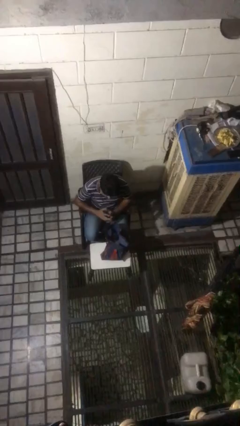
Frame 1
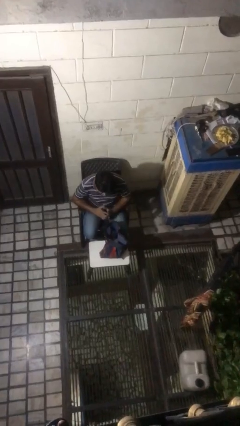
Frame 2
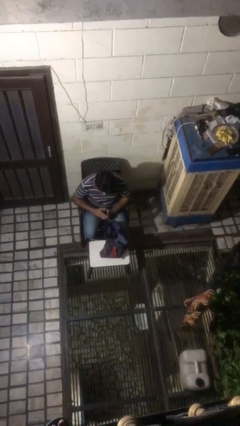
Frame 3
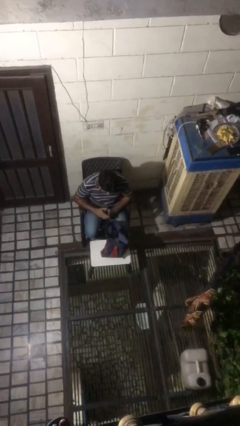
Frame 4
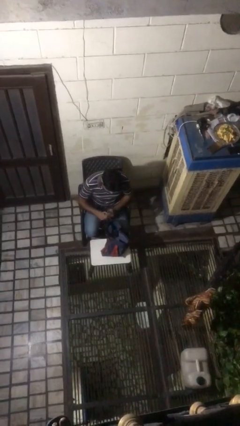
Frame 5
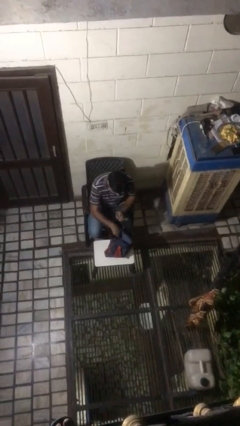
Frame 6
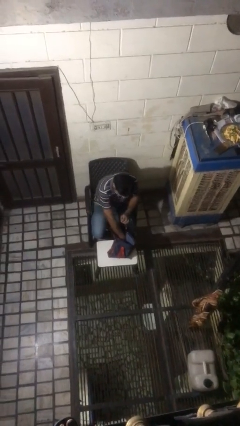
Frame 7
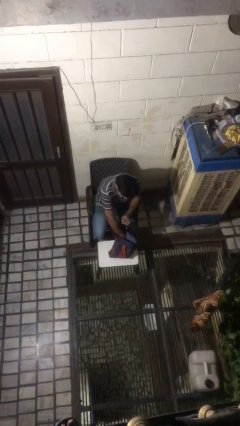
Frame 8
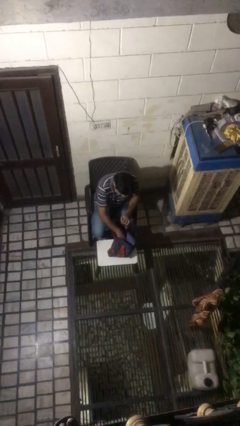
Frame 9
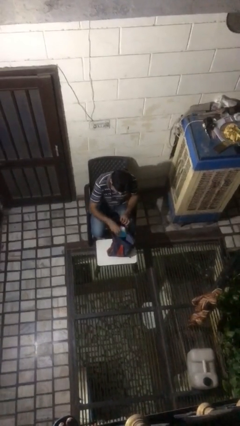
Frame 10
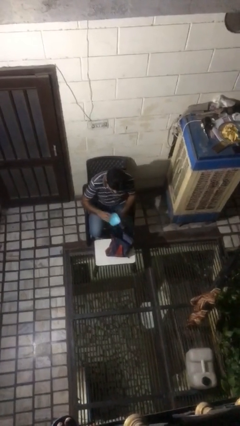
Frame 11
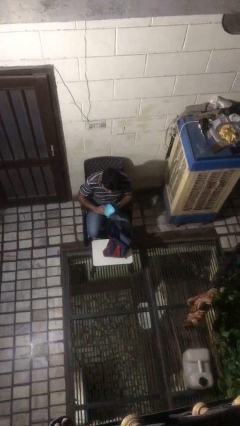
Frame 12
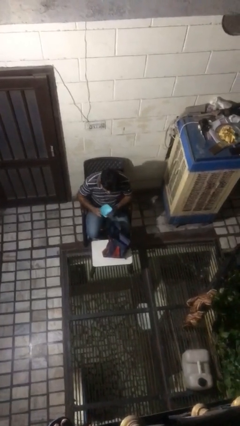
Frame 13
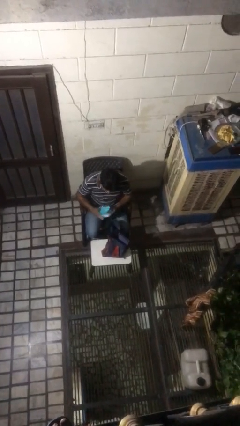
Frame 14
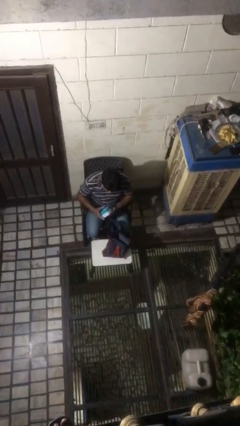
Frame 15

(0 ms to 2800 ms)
person takes object from bag

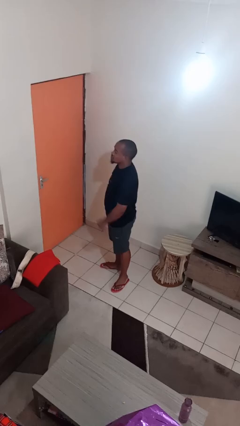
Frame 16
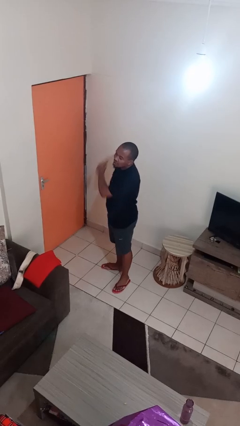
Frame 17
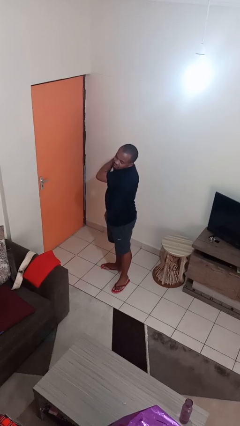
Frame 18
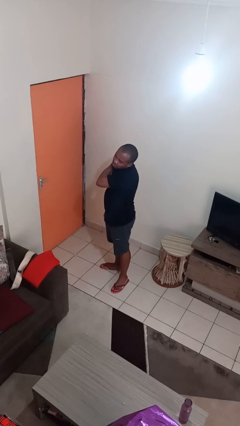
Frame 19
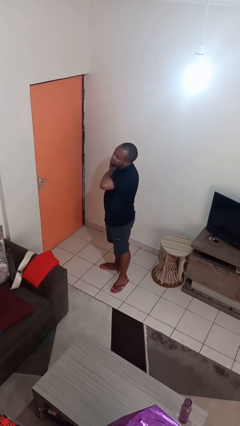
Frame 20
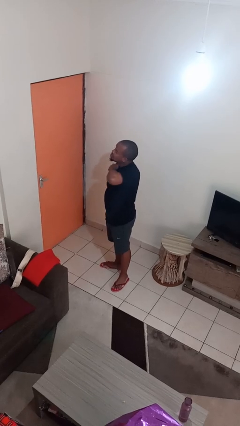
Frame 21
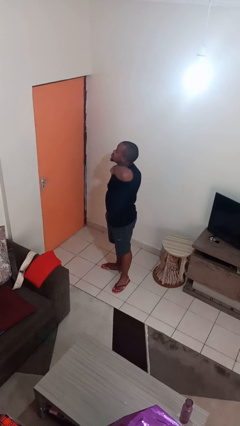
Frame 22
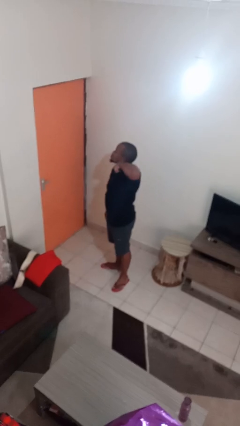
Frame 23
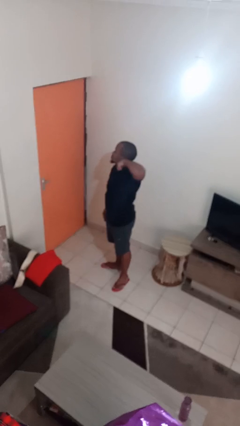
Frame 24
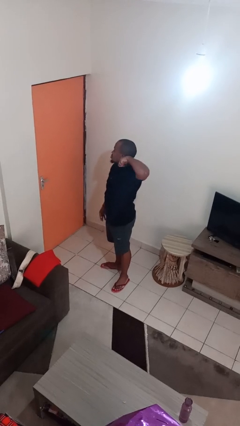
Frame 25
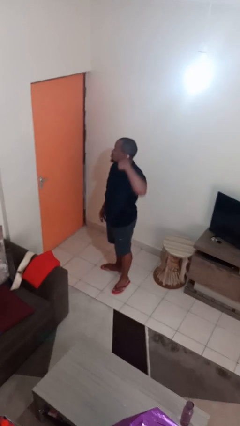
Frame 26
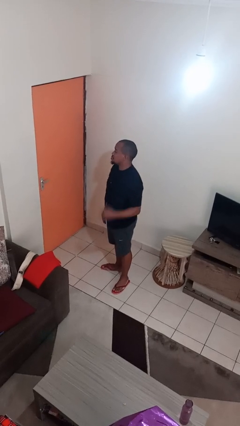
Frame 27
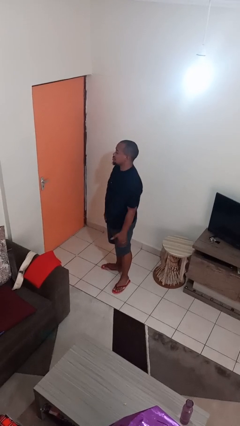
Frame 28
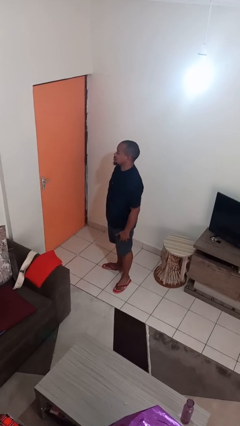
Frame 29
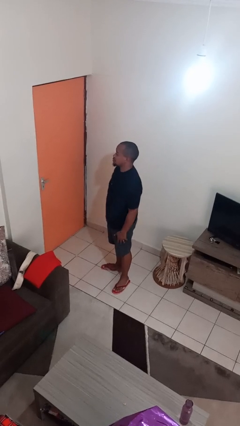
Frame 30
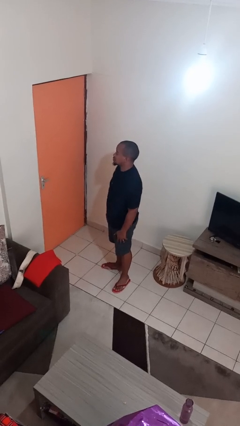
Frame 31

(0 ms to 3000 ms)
person gestures cut

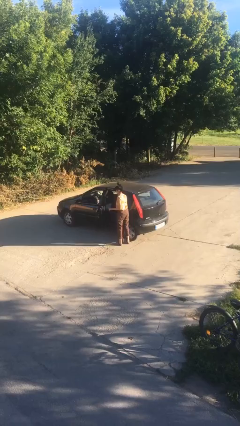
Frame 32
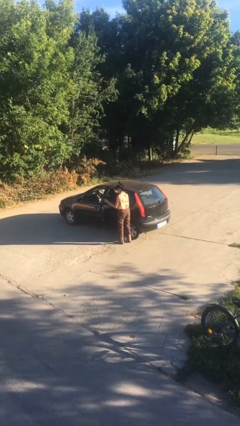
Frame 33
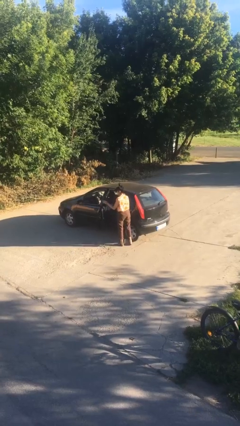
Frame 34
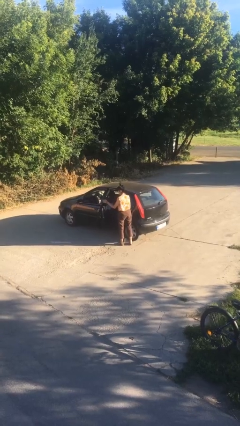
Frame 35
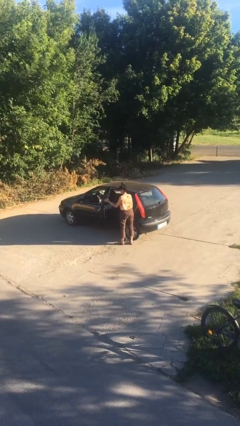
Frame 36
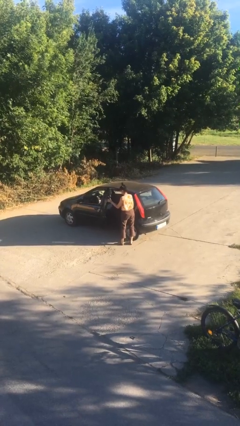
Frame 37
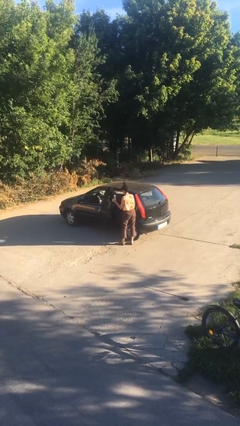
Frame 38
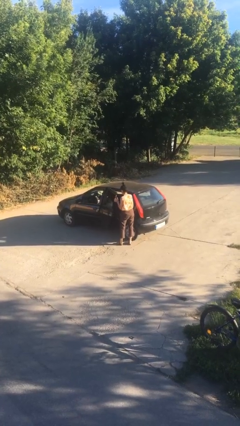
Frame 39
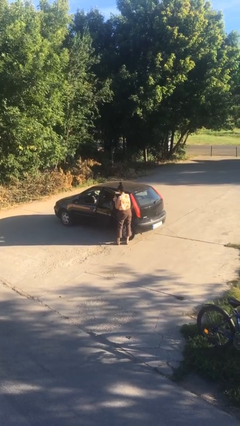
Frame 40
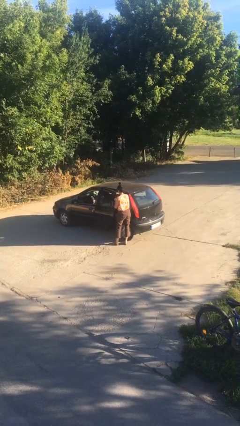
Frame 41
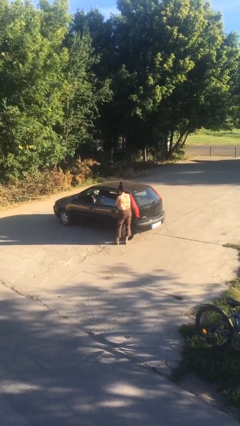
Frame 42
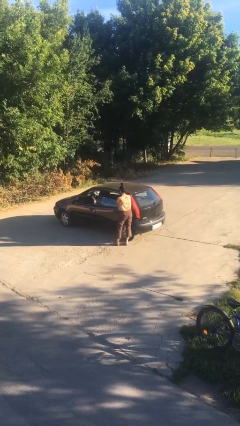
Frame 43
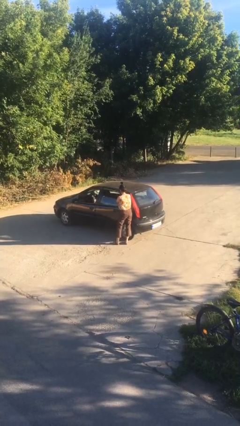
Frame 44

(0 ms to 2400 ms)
person closes car door

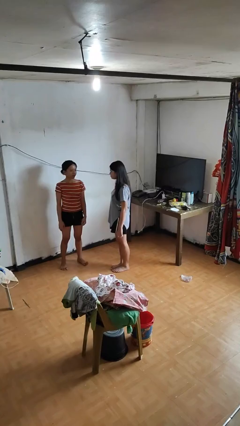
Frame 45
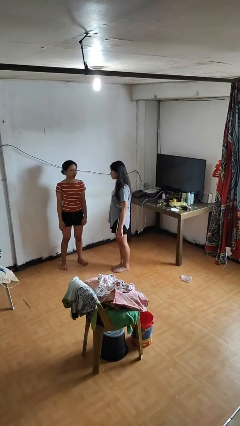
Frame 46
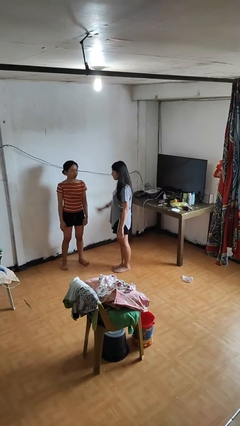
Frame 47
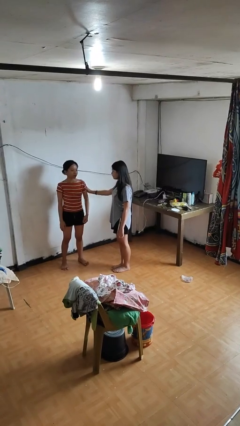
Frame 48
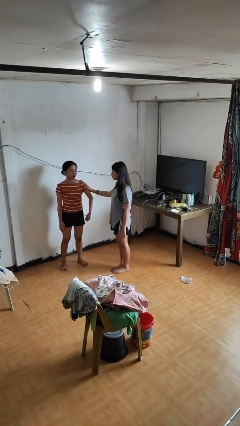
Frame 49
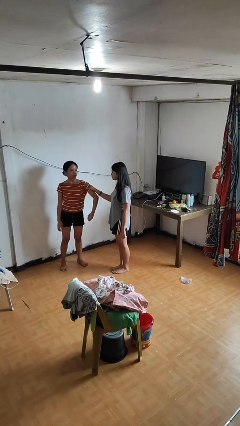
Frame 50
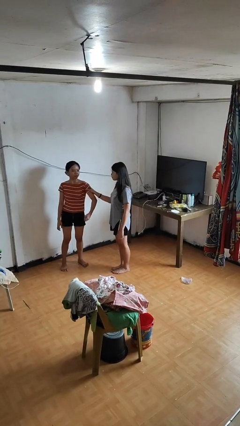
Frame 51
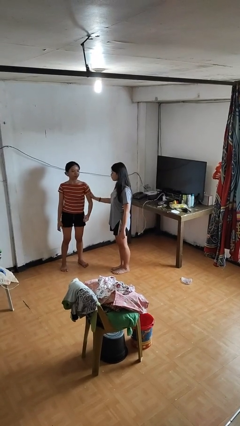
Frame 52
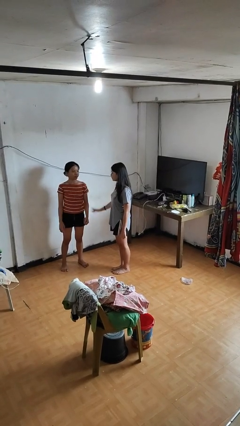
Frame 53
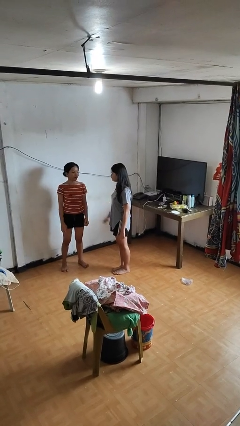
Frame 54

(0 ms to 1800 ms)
person grabs person by bicep

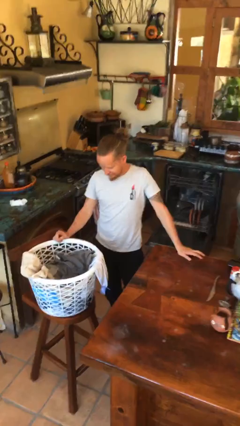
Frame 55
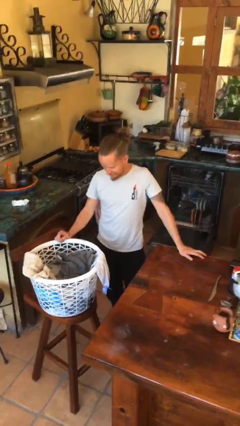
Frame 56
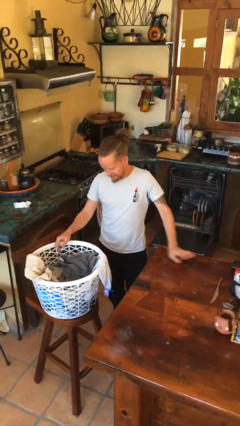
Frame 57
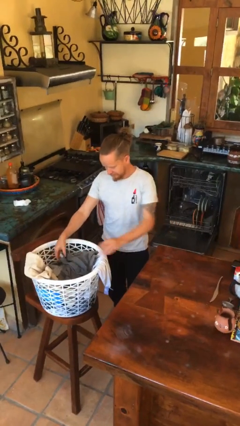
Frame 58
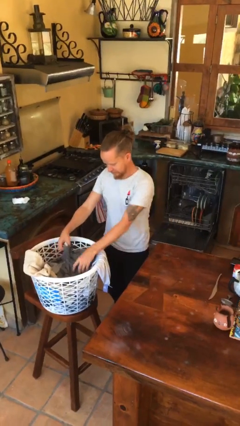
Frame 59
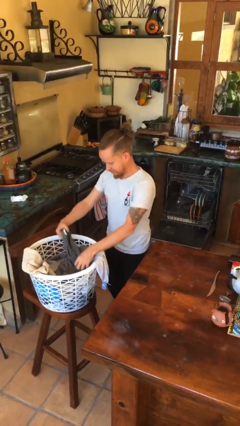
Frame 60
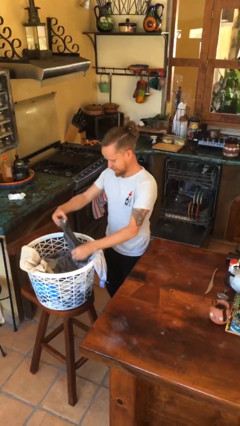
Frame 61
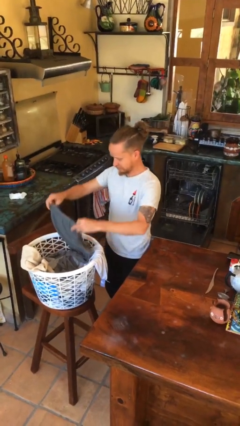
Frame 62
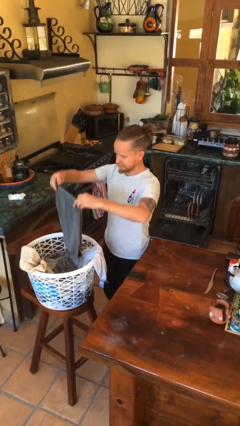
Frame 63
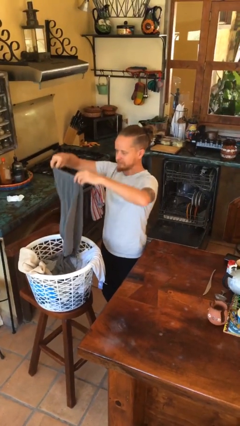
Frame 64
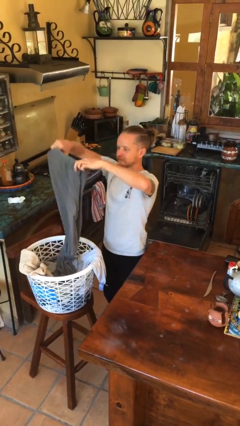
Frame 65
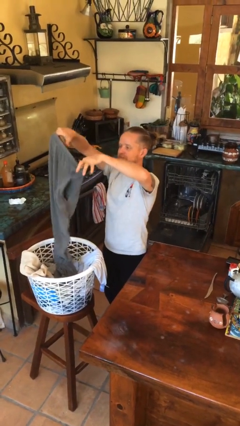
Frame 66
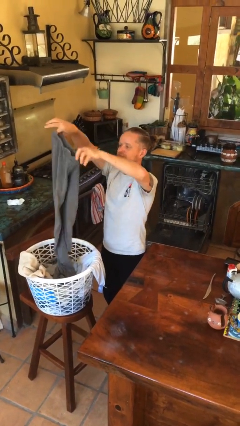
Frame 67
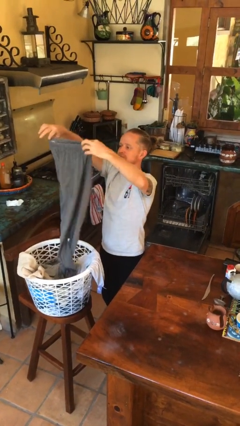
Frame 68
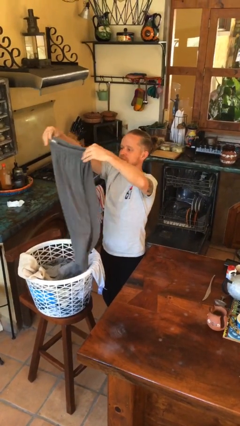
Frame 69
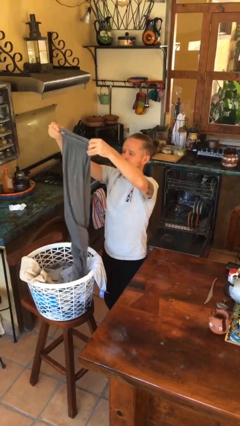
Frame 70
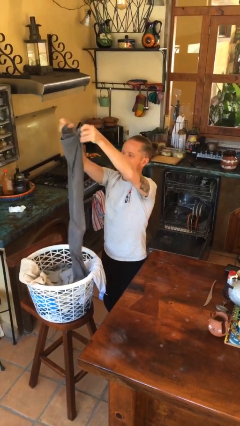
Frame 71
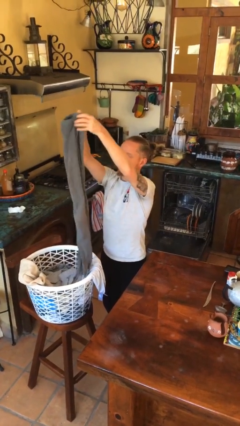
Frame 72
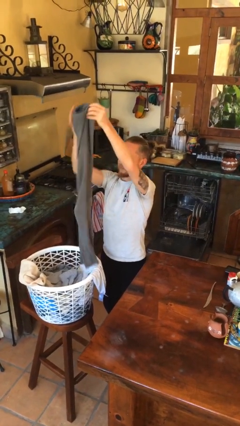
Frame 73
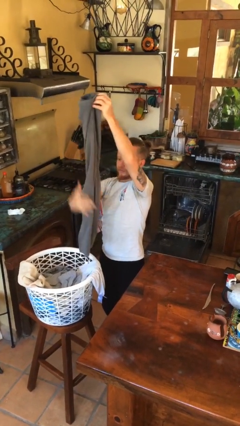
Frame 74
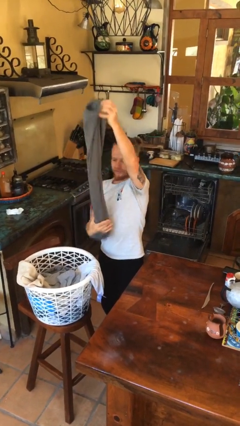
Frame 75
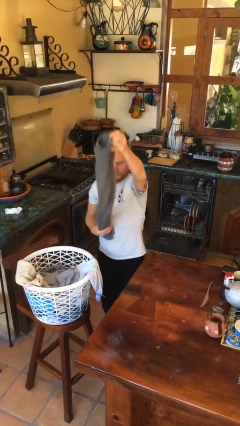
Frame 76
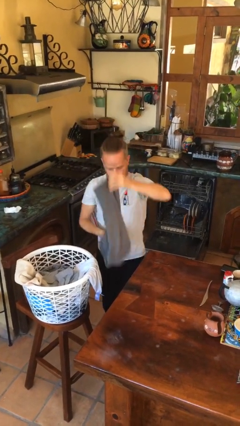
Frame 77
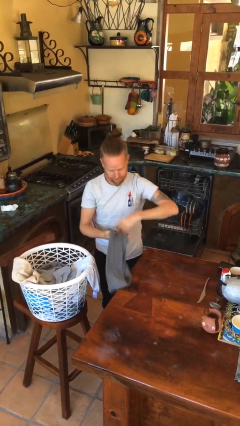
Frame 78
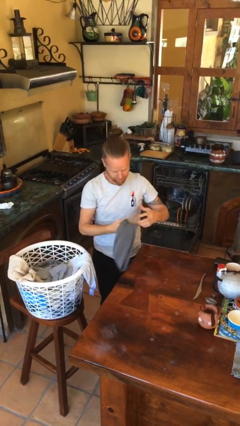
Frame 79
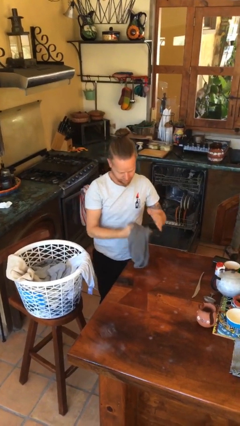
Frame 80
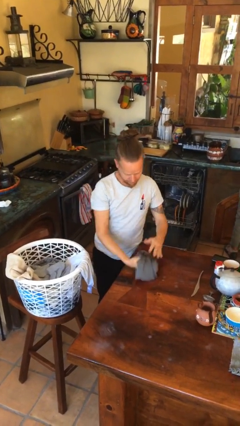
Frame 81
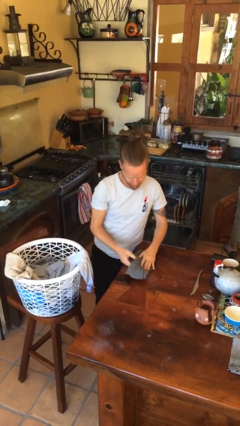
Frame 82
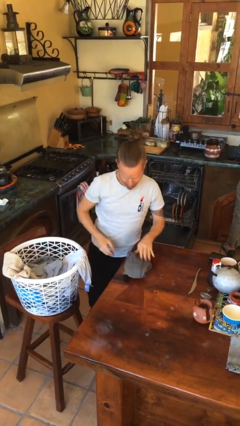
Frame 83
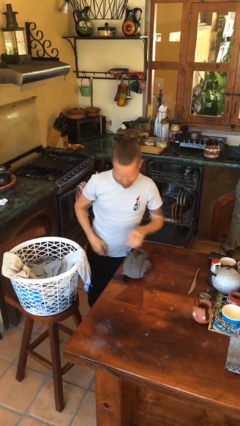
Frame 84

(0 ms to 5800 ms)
person folds pants

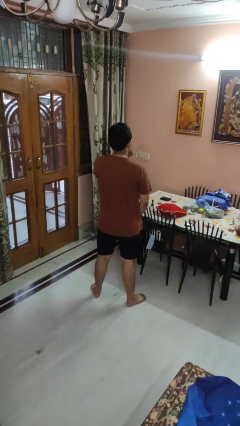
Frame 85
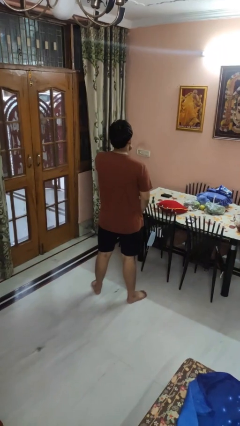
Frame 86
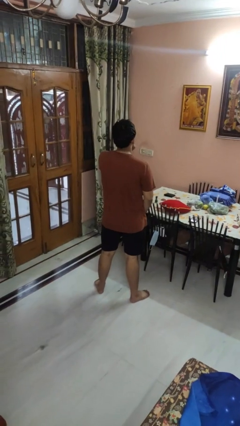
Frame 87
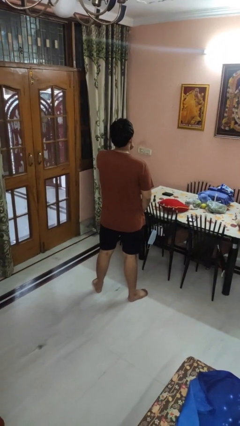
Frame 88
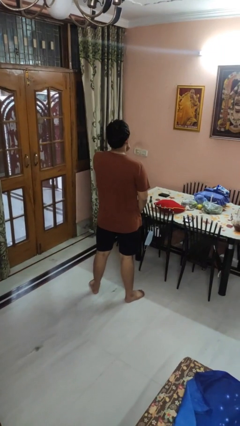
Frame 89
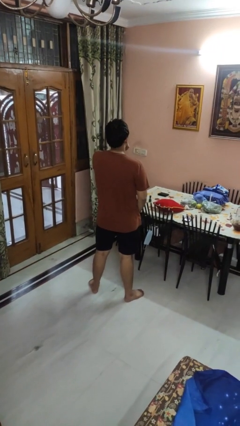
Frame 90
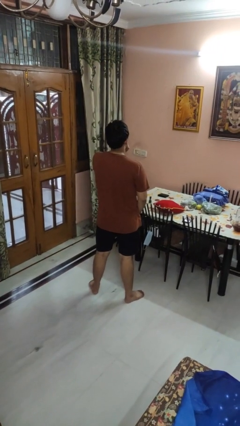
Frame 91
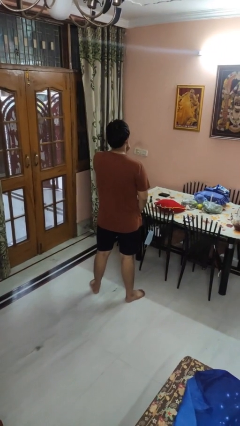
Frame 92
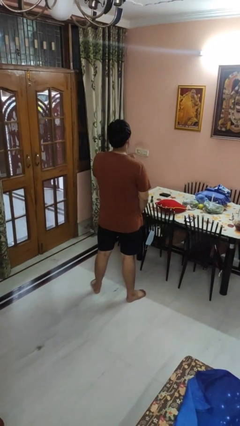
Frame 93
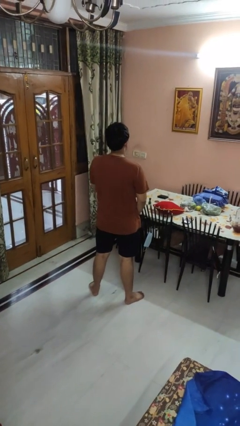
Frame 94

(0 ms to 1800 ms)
person gestures be quiet
